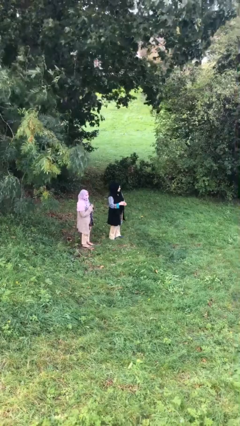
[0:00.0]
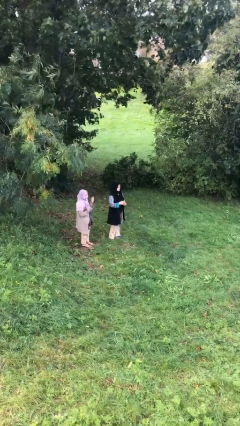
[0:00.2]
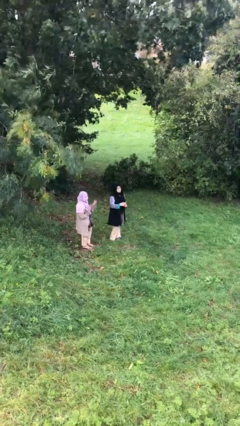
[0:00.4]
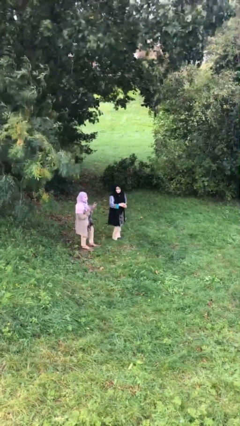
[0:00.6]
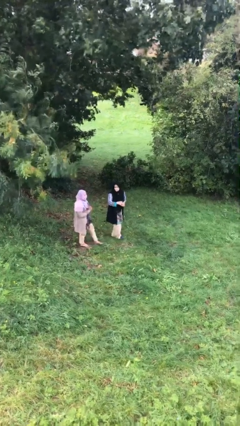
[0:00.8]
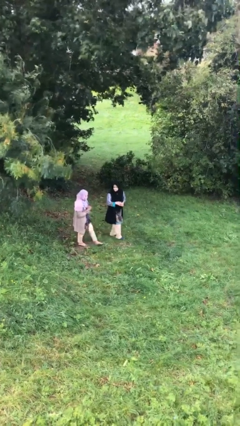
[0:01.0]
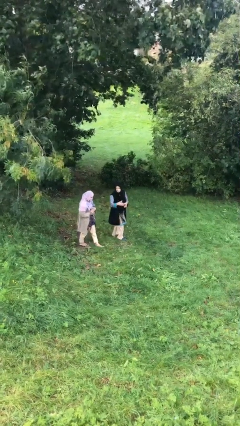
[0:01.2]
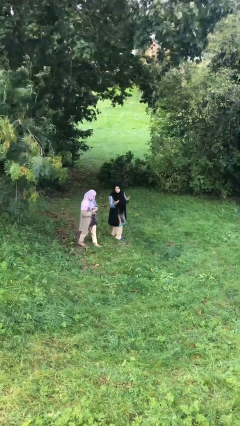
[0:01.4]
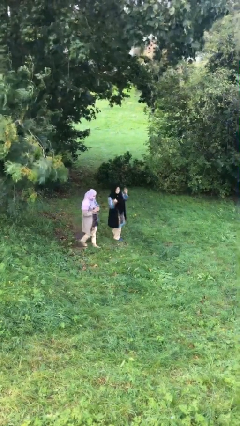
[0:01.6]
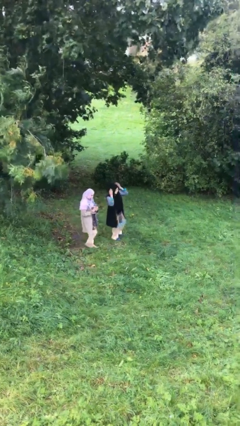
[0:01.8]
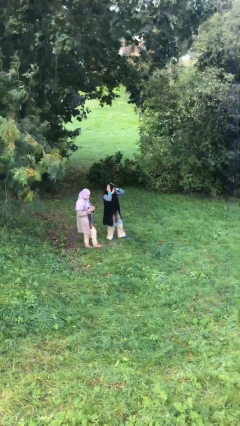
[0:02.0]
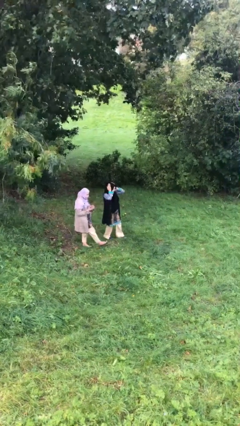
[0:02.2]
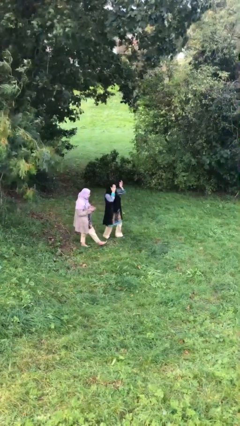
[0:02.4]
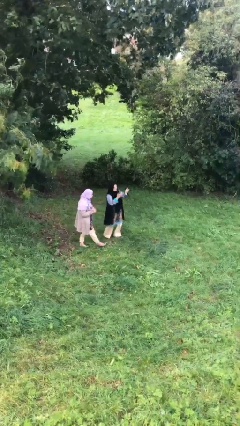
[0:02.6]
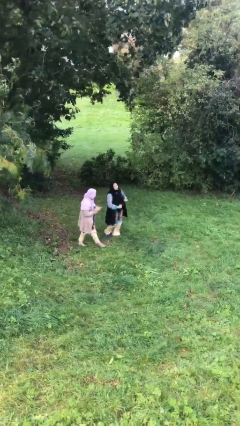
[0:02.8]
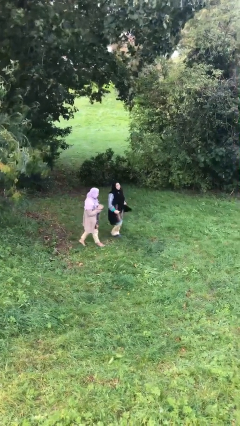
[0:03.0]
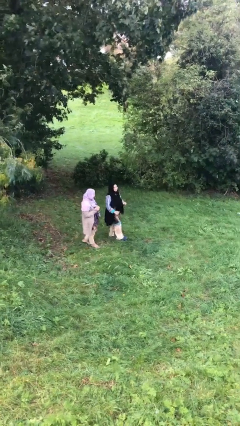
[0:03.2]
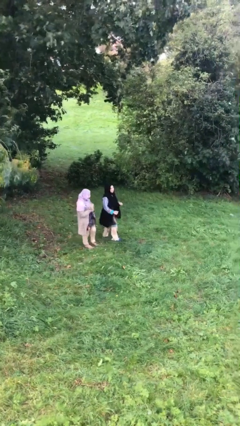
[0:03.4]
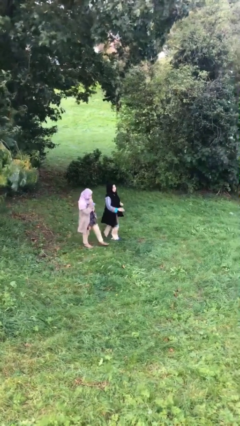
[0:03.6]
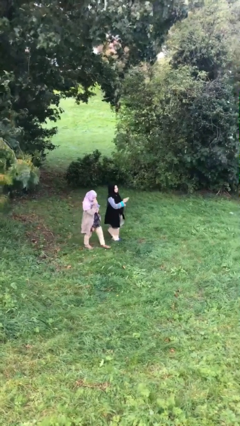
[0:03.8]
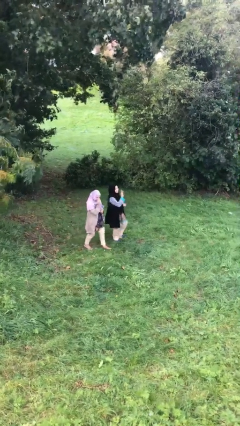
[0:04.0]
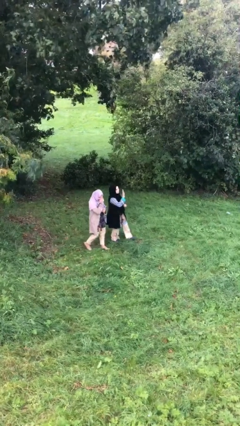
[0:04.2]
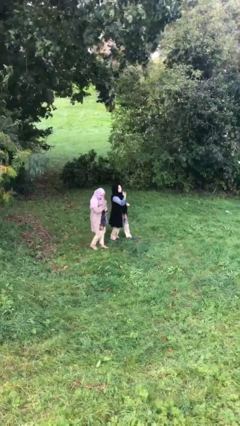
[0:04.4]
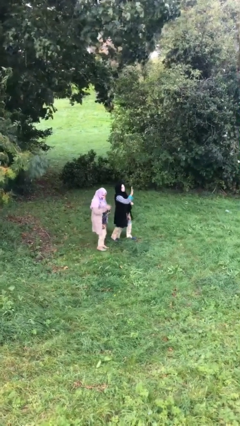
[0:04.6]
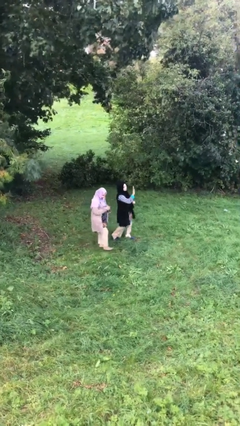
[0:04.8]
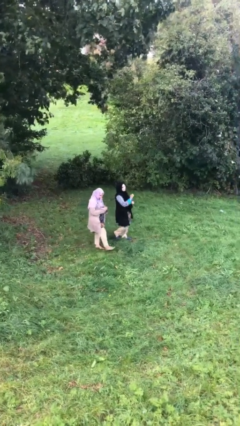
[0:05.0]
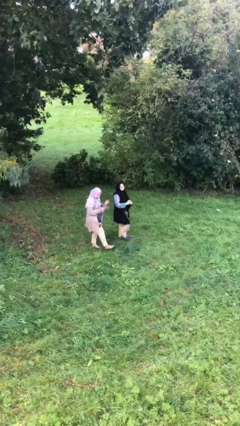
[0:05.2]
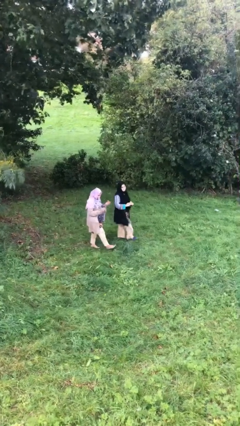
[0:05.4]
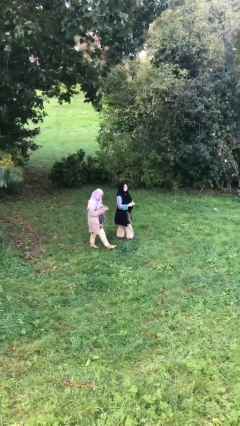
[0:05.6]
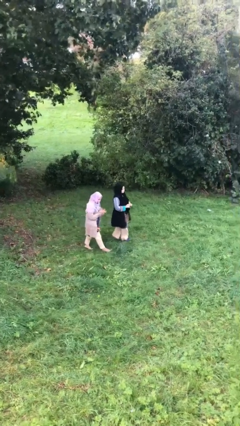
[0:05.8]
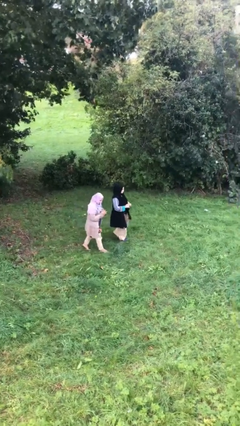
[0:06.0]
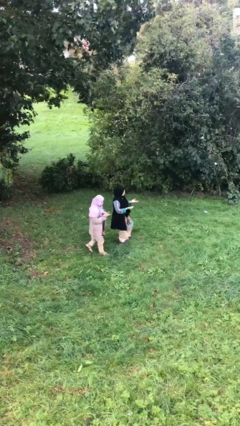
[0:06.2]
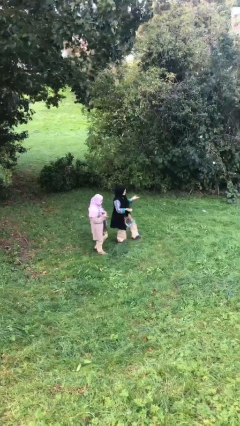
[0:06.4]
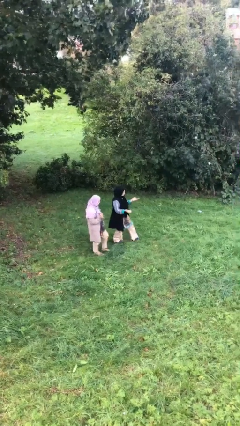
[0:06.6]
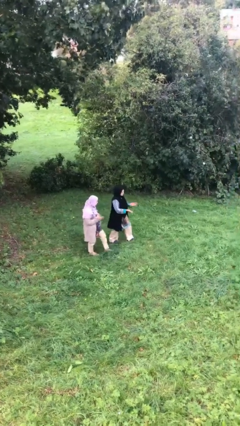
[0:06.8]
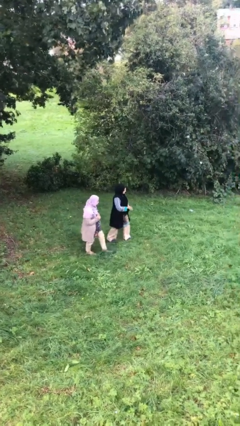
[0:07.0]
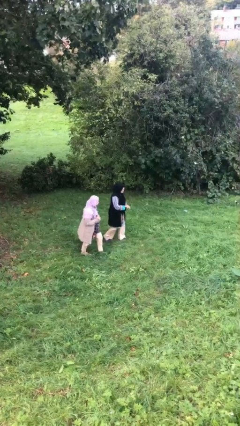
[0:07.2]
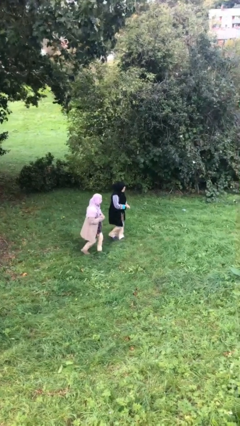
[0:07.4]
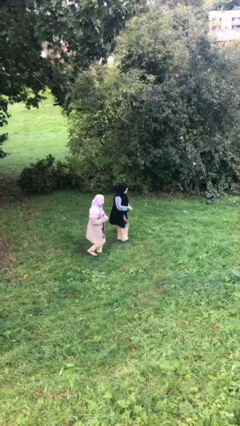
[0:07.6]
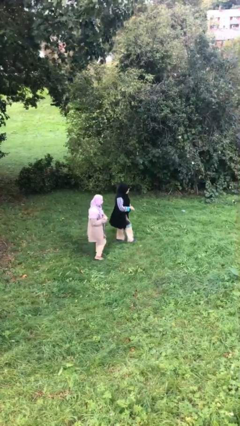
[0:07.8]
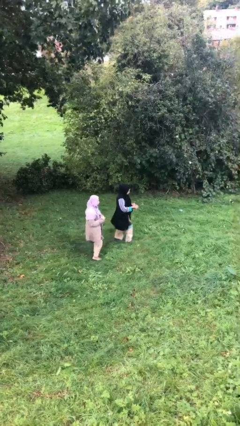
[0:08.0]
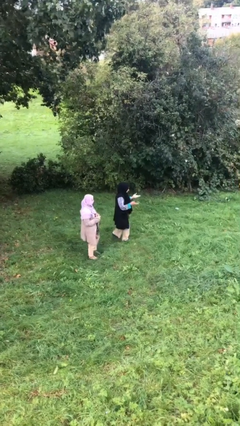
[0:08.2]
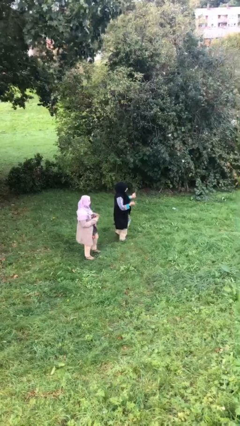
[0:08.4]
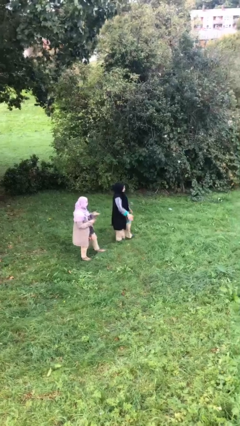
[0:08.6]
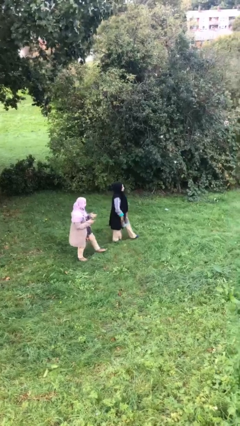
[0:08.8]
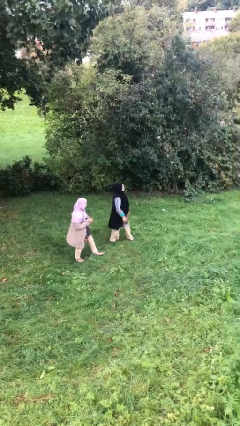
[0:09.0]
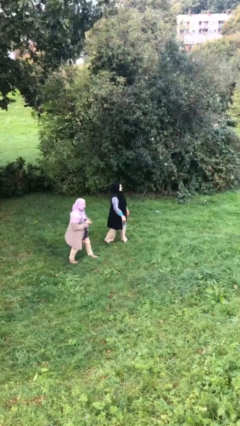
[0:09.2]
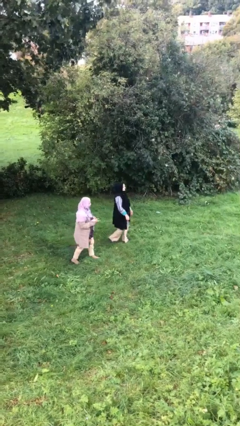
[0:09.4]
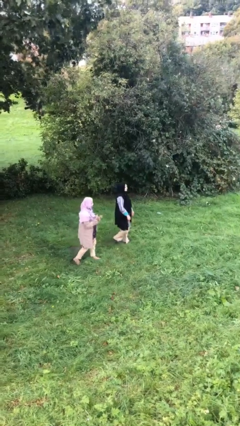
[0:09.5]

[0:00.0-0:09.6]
person talks to person

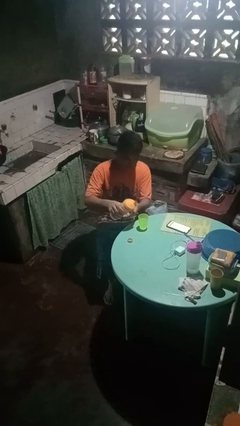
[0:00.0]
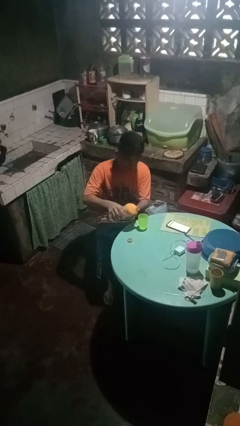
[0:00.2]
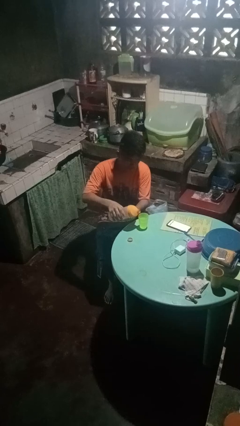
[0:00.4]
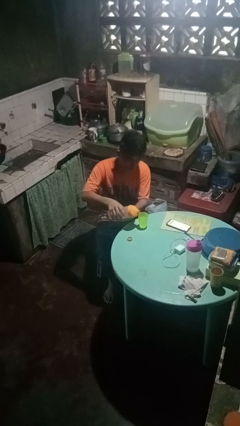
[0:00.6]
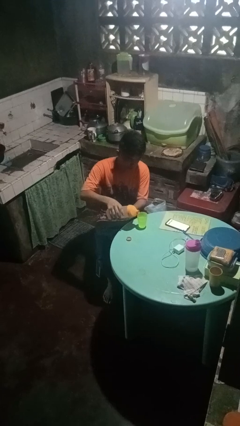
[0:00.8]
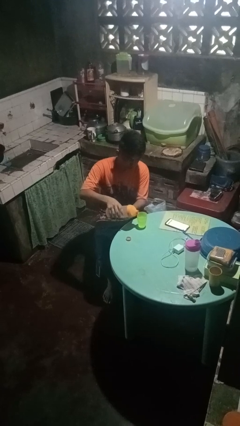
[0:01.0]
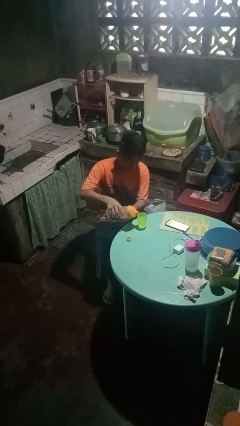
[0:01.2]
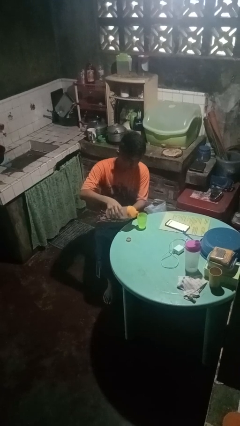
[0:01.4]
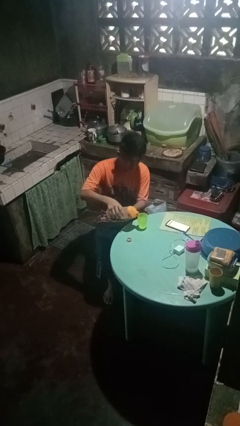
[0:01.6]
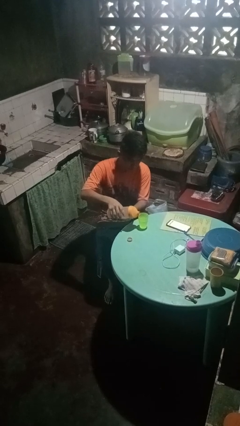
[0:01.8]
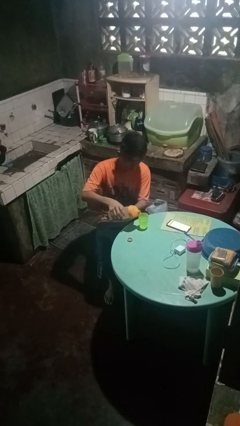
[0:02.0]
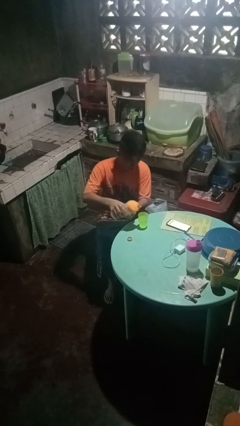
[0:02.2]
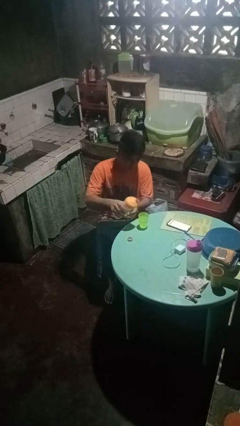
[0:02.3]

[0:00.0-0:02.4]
person pours liquid into cup

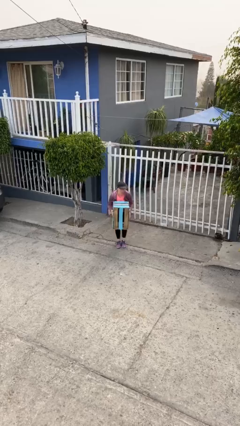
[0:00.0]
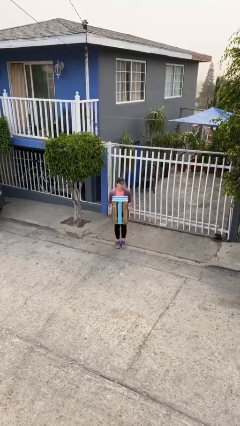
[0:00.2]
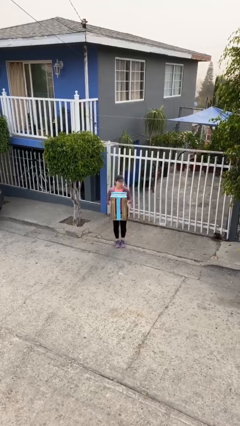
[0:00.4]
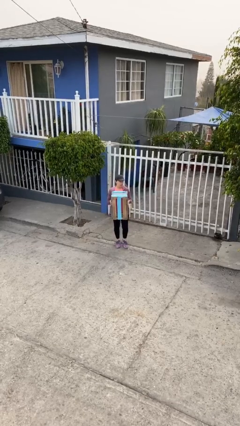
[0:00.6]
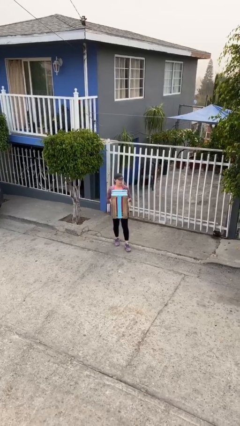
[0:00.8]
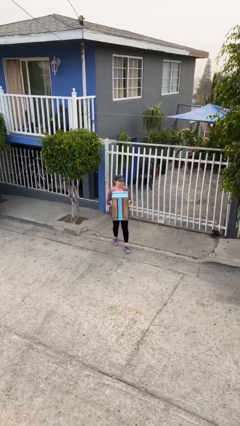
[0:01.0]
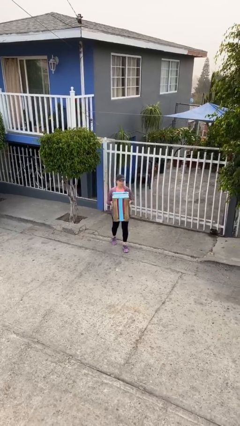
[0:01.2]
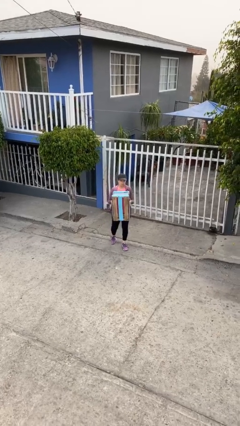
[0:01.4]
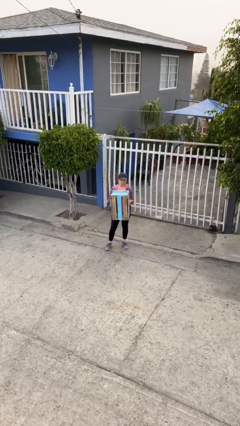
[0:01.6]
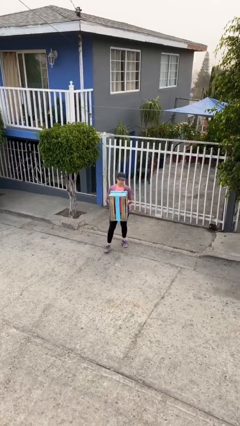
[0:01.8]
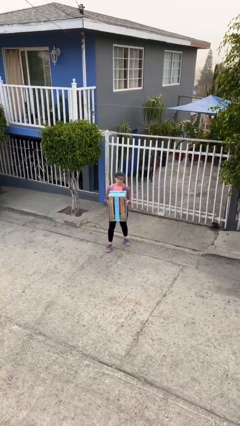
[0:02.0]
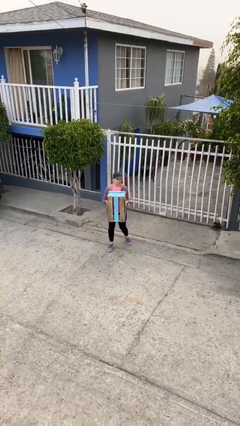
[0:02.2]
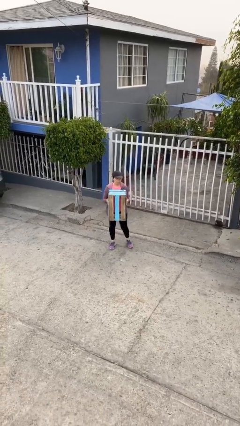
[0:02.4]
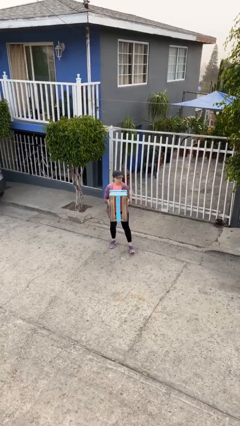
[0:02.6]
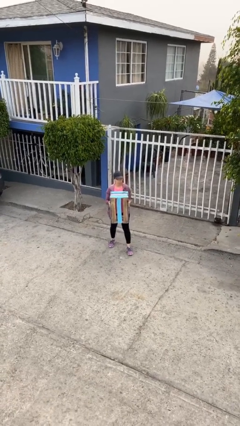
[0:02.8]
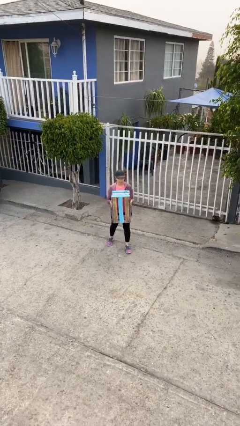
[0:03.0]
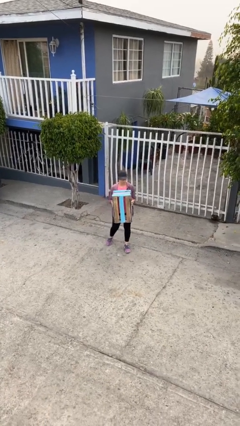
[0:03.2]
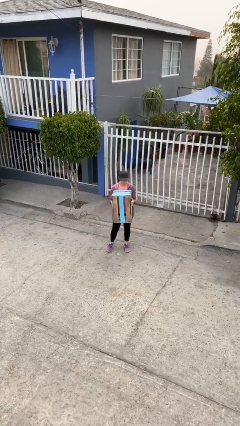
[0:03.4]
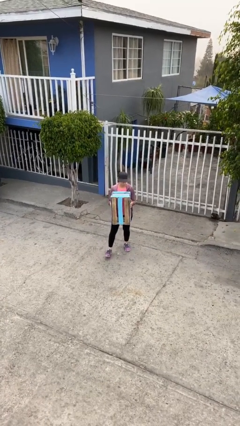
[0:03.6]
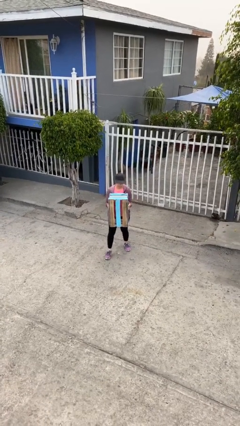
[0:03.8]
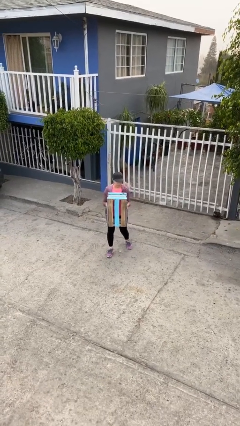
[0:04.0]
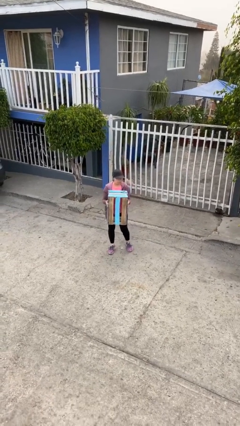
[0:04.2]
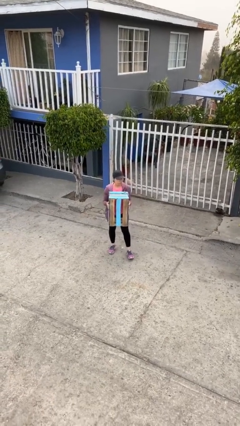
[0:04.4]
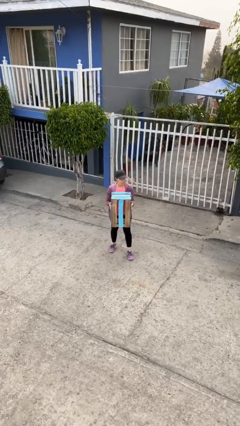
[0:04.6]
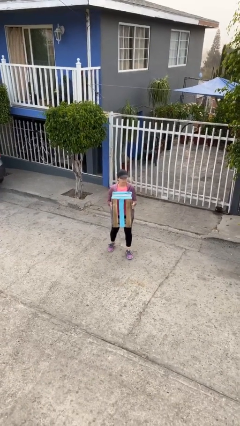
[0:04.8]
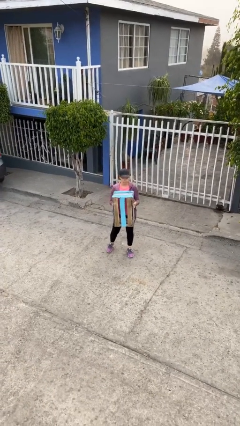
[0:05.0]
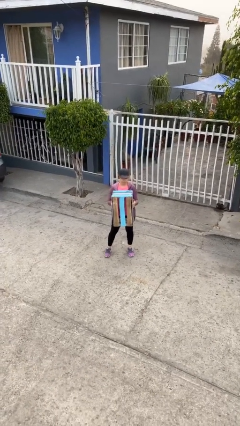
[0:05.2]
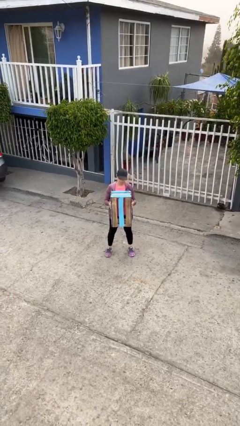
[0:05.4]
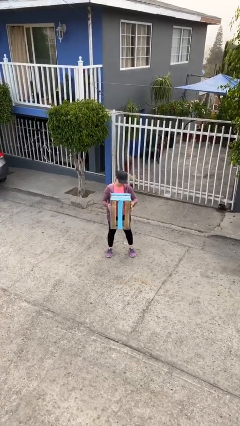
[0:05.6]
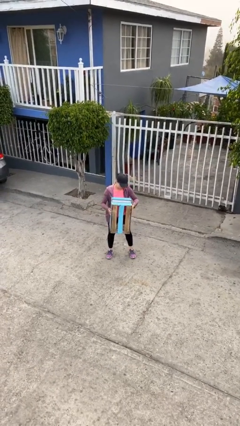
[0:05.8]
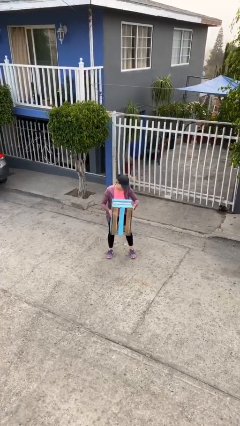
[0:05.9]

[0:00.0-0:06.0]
person carries heavy object
